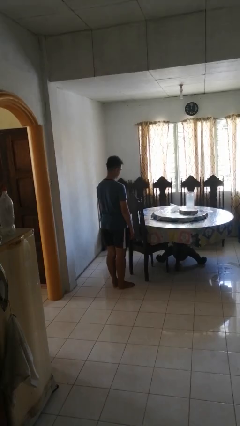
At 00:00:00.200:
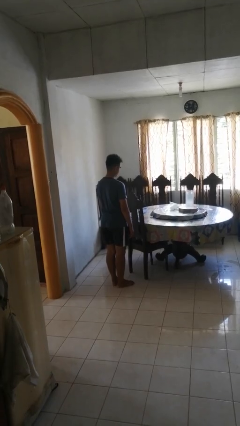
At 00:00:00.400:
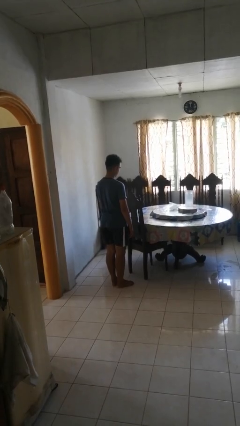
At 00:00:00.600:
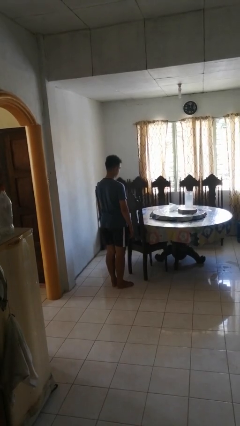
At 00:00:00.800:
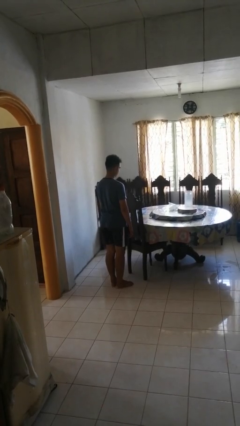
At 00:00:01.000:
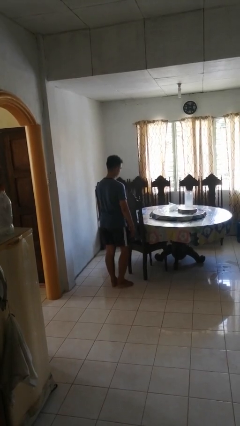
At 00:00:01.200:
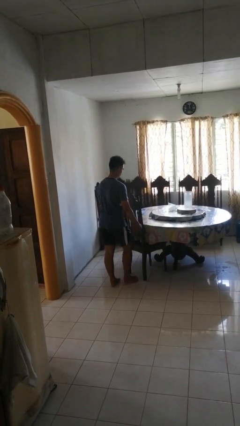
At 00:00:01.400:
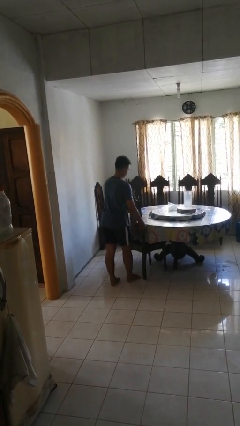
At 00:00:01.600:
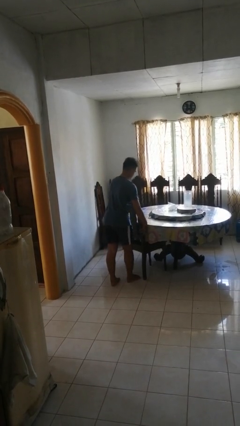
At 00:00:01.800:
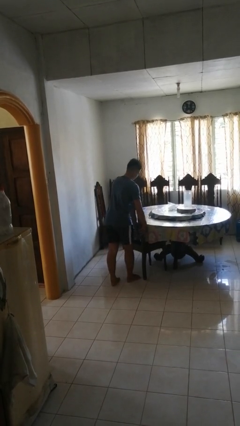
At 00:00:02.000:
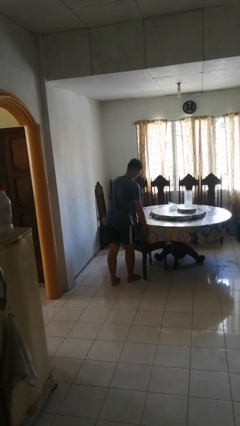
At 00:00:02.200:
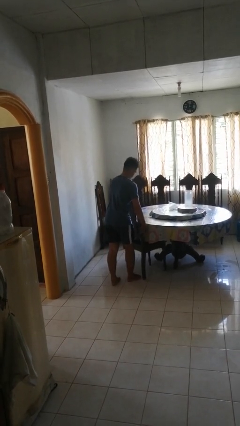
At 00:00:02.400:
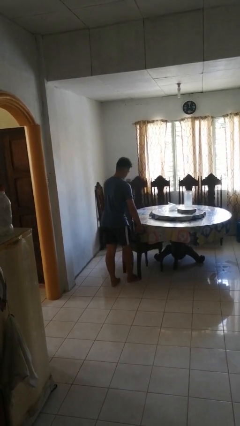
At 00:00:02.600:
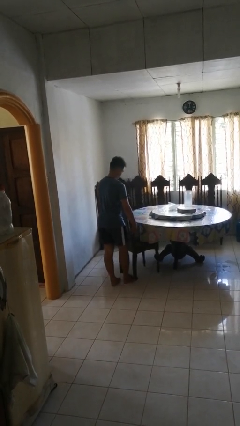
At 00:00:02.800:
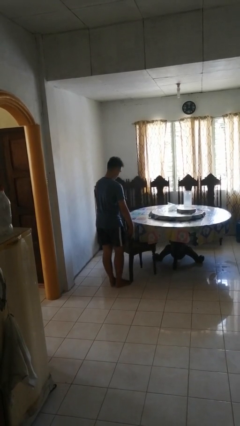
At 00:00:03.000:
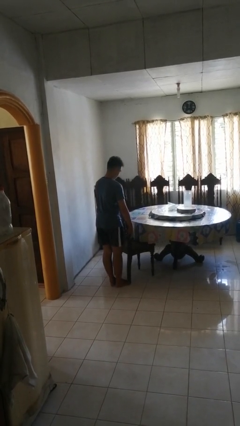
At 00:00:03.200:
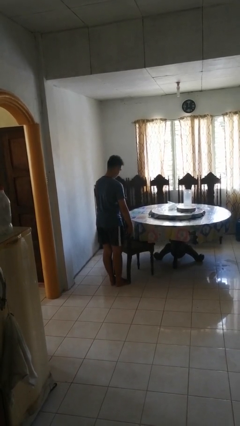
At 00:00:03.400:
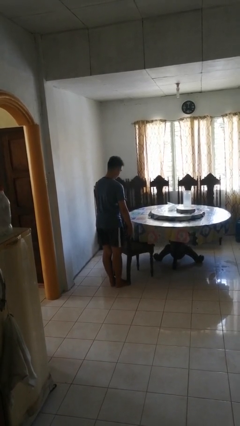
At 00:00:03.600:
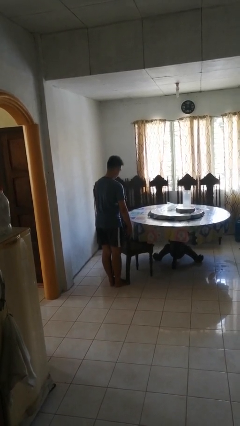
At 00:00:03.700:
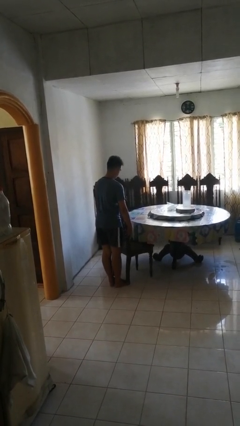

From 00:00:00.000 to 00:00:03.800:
person pulls out chair

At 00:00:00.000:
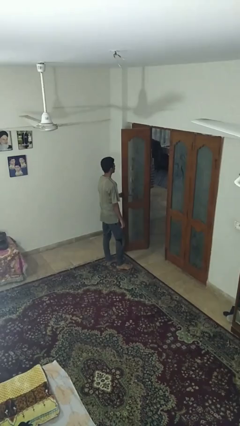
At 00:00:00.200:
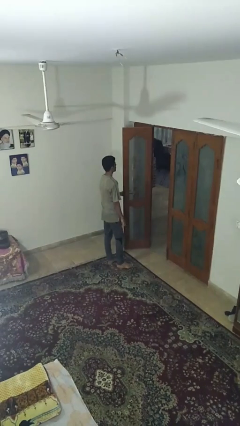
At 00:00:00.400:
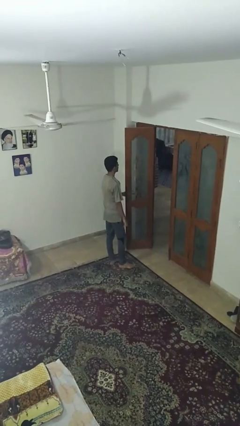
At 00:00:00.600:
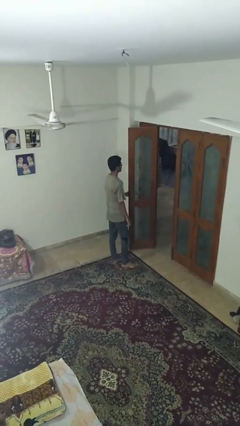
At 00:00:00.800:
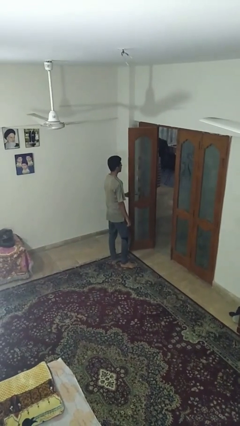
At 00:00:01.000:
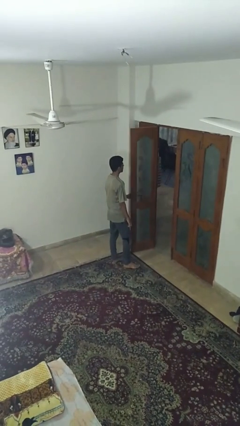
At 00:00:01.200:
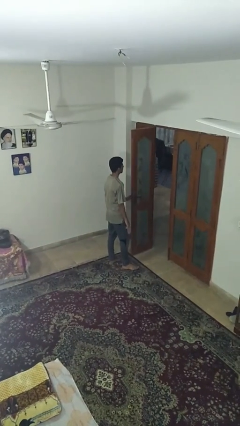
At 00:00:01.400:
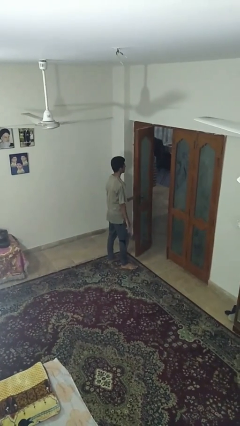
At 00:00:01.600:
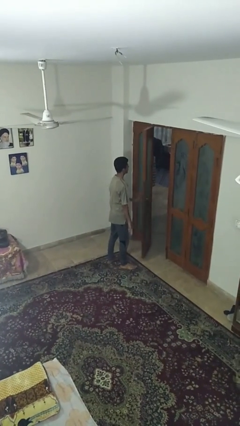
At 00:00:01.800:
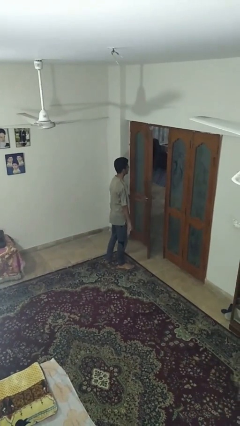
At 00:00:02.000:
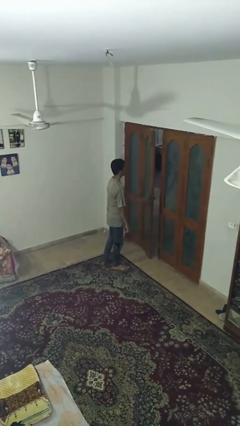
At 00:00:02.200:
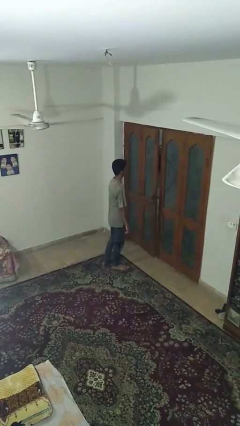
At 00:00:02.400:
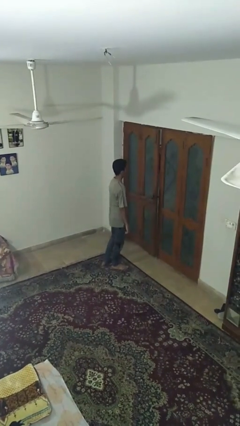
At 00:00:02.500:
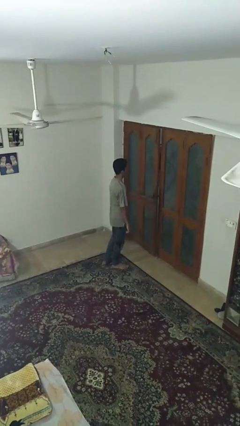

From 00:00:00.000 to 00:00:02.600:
person closes facility door

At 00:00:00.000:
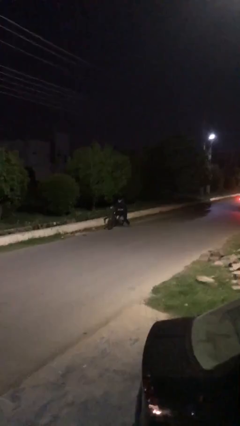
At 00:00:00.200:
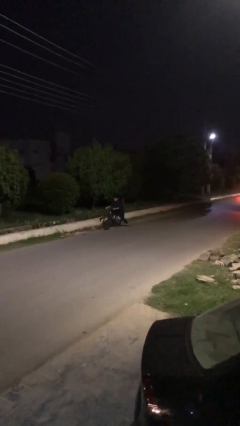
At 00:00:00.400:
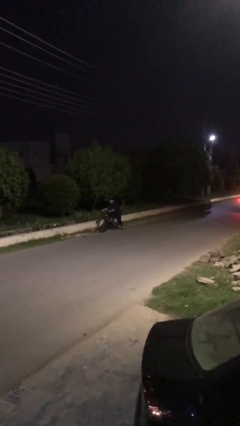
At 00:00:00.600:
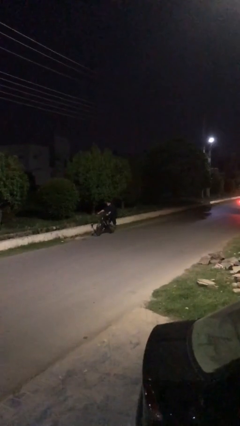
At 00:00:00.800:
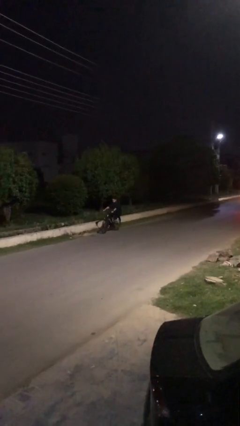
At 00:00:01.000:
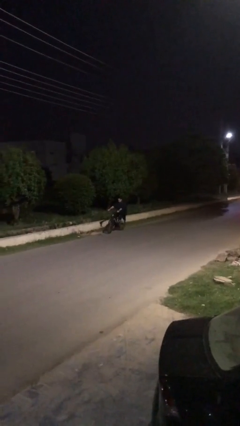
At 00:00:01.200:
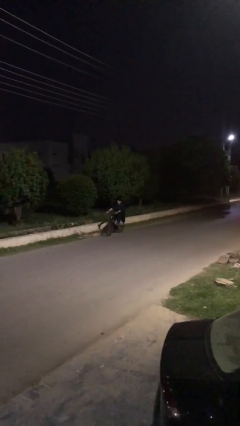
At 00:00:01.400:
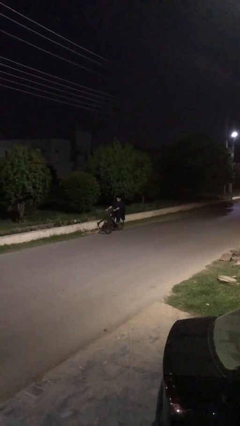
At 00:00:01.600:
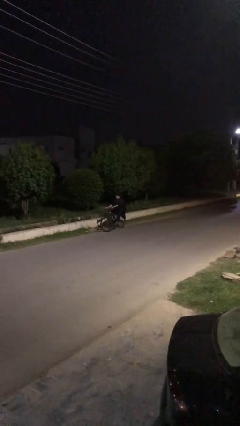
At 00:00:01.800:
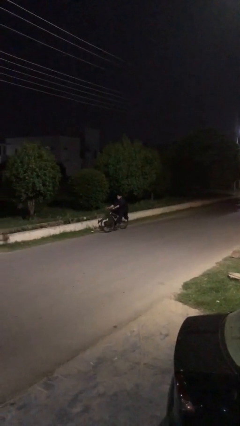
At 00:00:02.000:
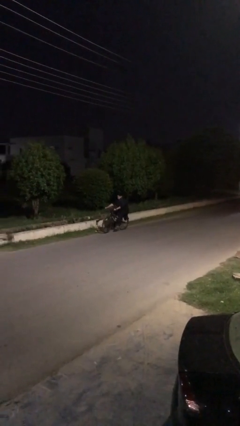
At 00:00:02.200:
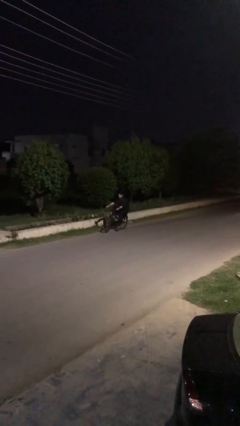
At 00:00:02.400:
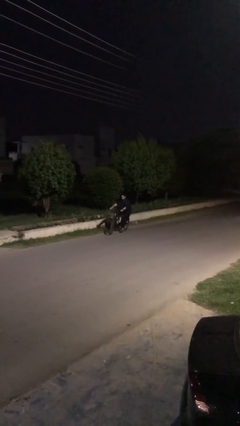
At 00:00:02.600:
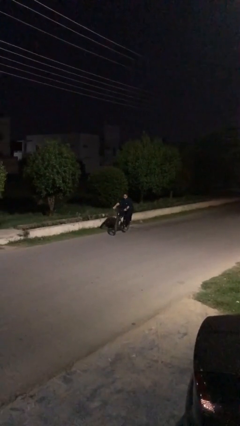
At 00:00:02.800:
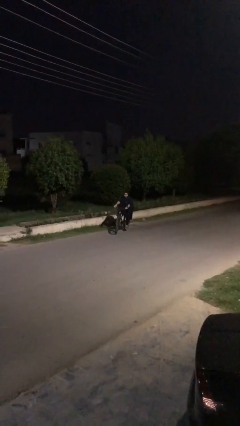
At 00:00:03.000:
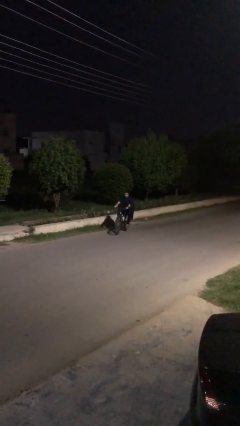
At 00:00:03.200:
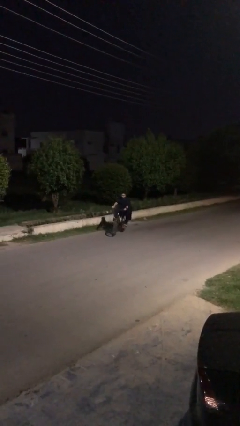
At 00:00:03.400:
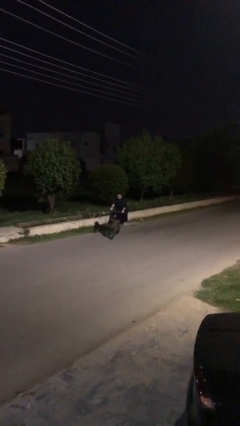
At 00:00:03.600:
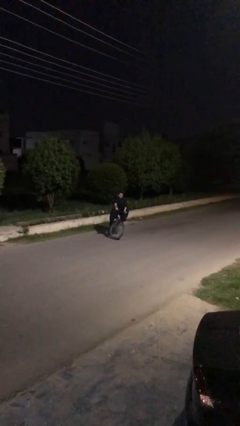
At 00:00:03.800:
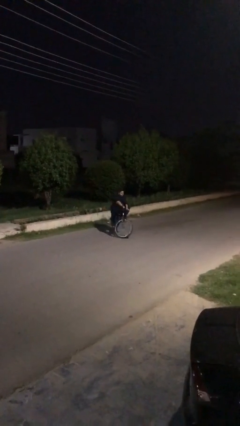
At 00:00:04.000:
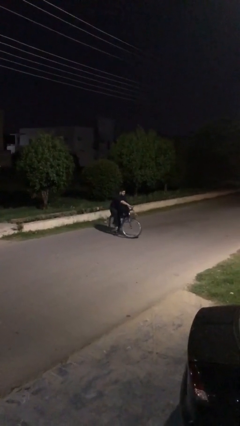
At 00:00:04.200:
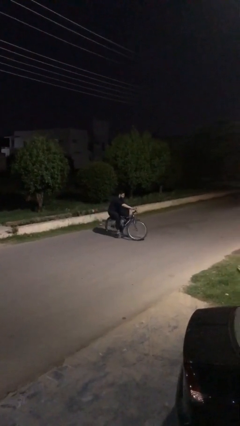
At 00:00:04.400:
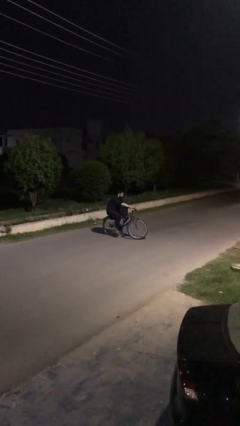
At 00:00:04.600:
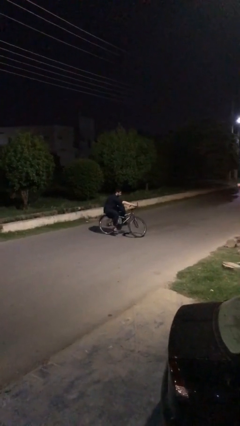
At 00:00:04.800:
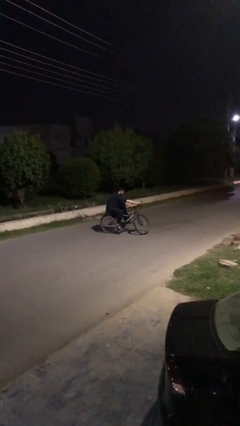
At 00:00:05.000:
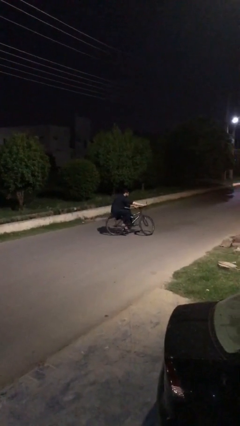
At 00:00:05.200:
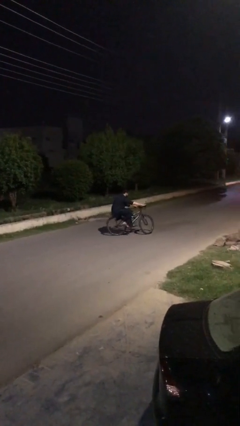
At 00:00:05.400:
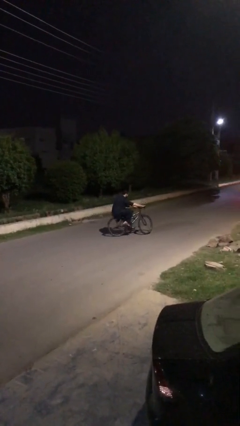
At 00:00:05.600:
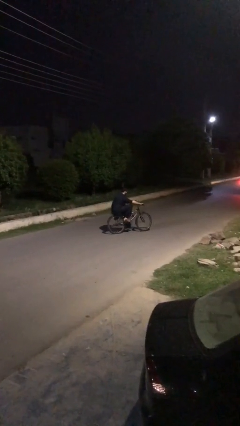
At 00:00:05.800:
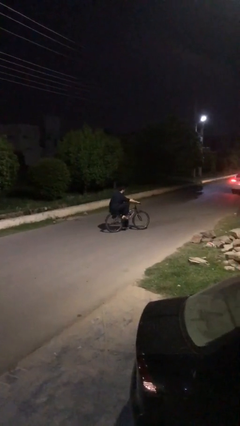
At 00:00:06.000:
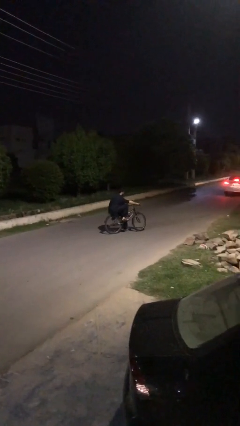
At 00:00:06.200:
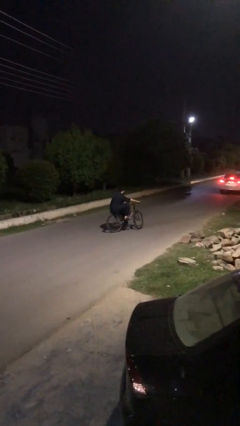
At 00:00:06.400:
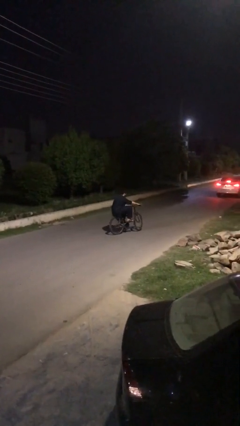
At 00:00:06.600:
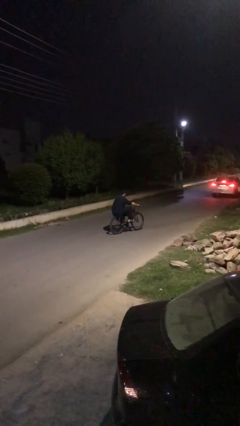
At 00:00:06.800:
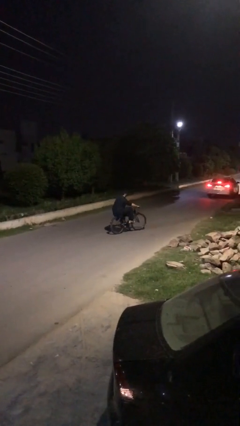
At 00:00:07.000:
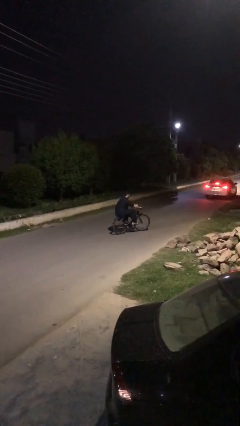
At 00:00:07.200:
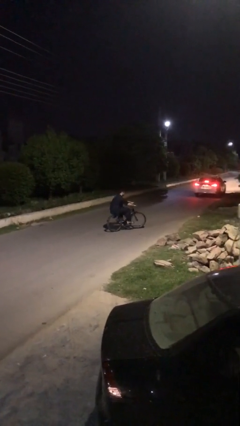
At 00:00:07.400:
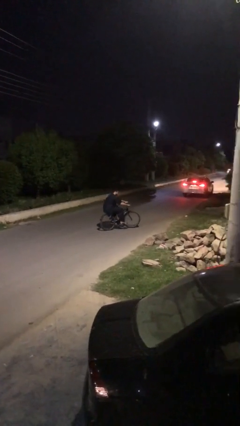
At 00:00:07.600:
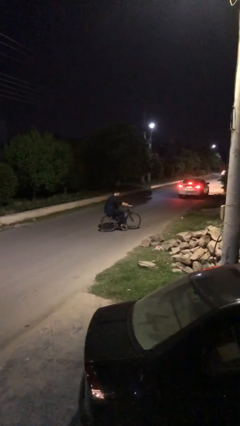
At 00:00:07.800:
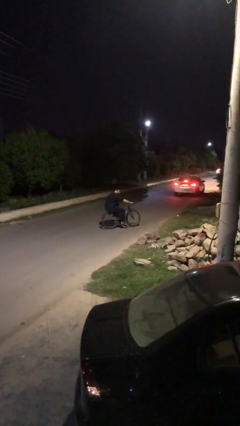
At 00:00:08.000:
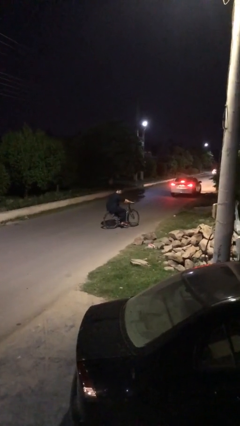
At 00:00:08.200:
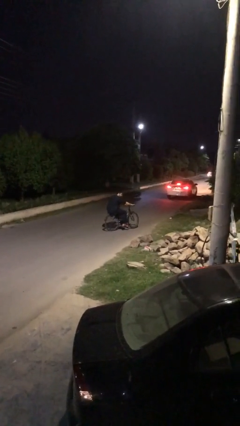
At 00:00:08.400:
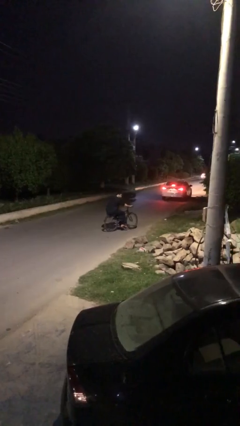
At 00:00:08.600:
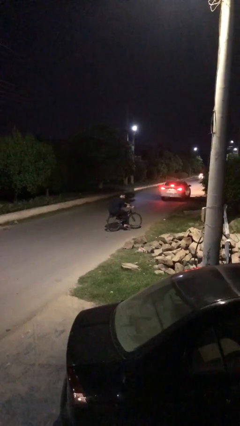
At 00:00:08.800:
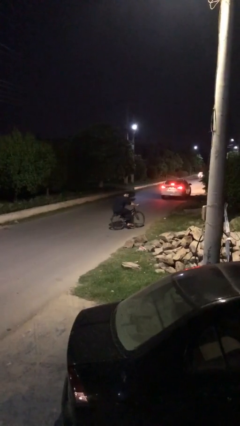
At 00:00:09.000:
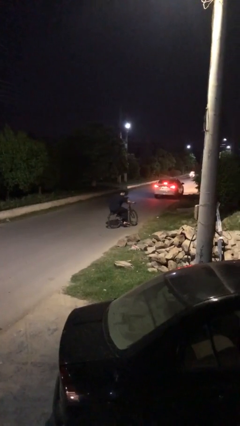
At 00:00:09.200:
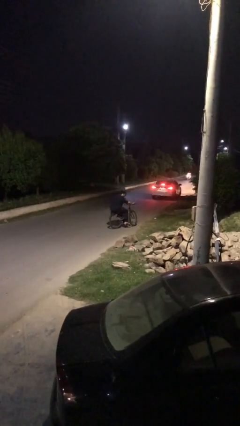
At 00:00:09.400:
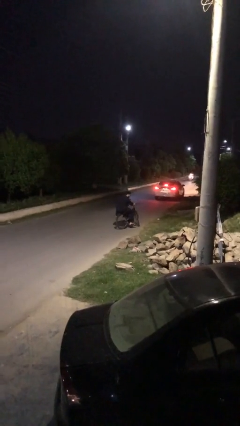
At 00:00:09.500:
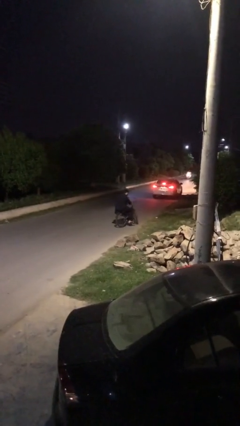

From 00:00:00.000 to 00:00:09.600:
person rides bicycle

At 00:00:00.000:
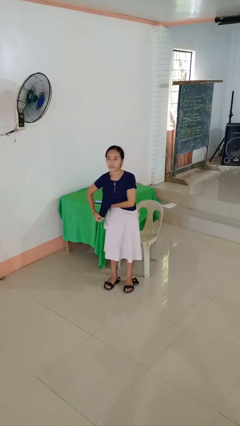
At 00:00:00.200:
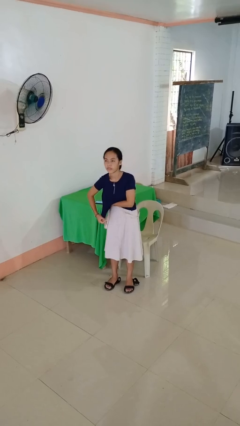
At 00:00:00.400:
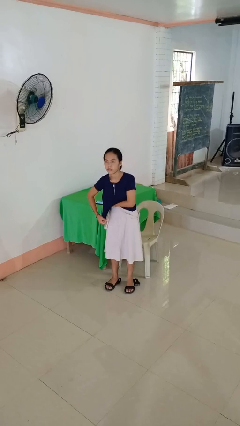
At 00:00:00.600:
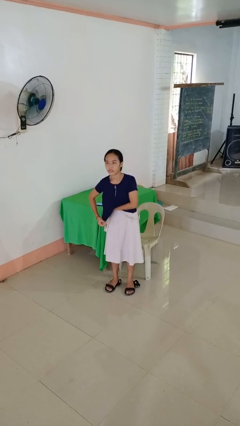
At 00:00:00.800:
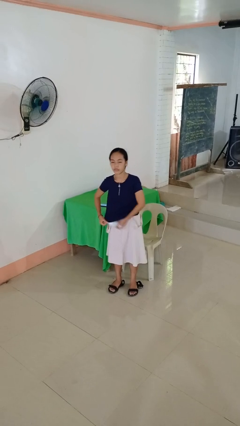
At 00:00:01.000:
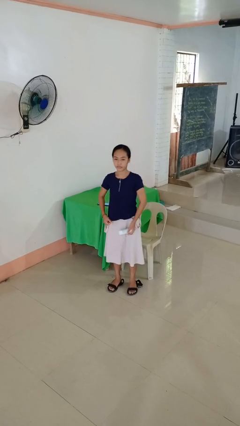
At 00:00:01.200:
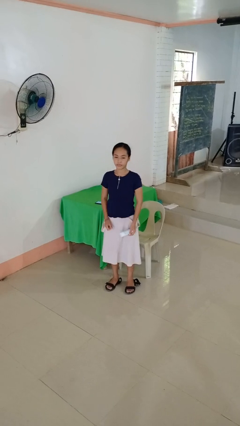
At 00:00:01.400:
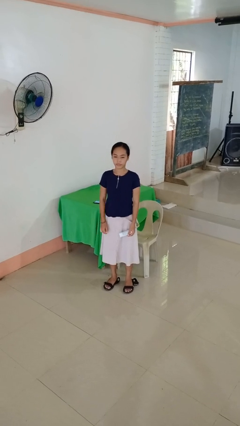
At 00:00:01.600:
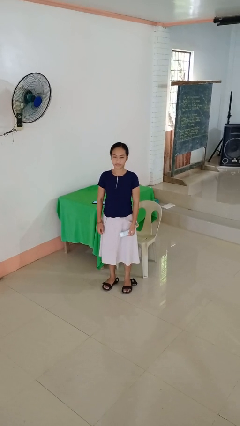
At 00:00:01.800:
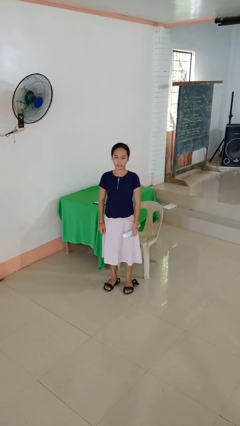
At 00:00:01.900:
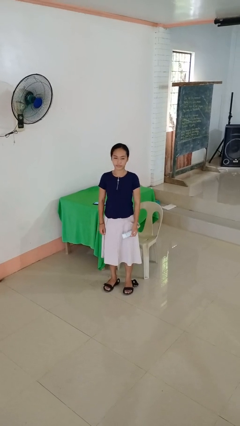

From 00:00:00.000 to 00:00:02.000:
person applies deodorant
